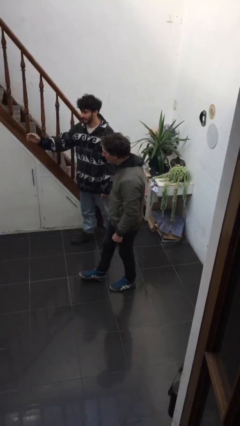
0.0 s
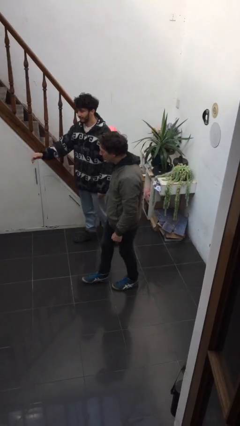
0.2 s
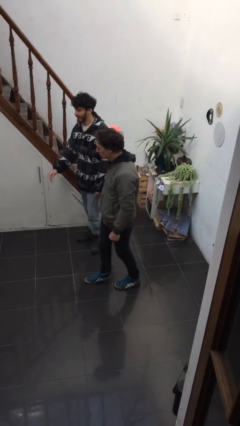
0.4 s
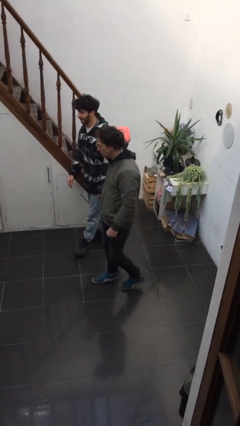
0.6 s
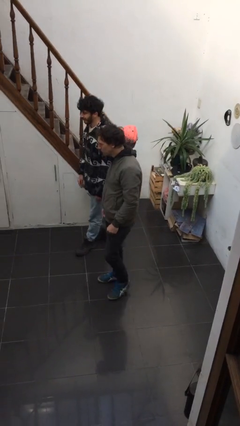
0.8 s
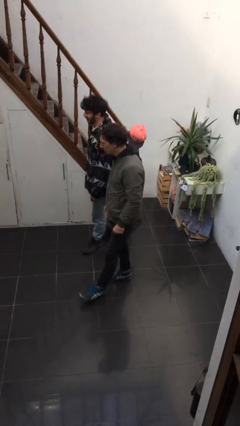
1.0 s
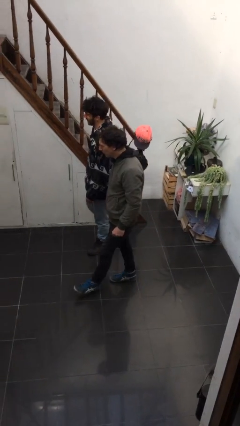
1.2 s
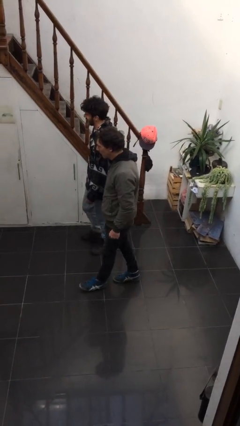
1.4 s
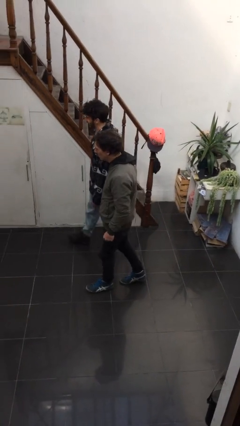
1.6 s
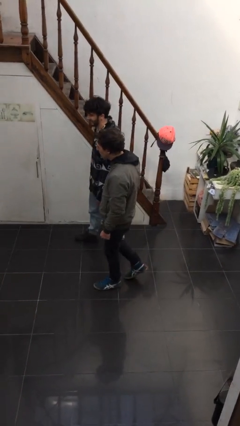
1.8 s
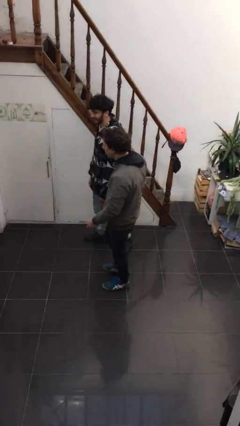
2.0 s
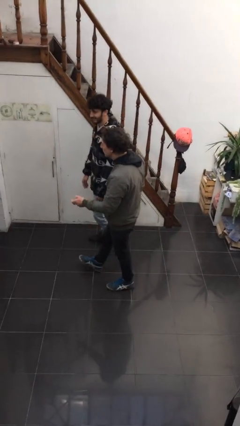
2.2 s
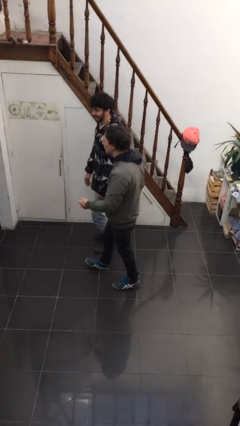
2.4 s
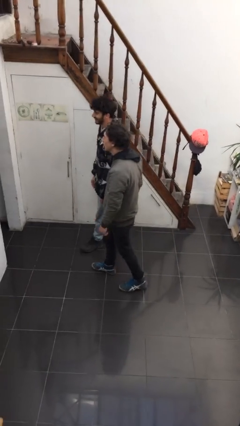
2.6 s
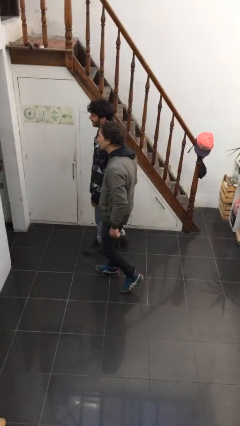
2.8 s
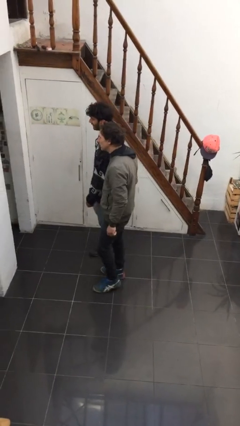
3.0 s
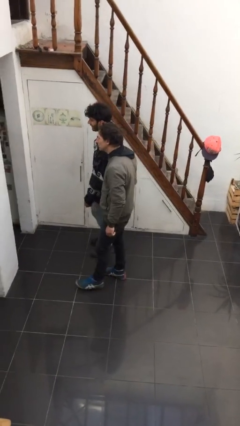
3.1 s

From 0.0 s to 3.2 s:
person talks to person

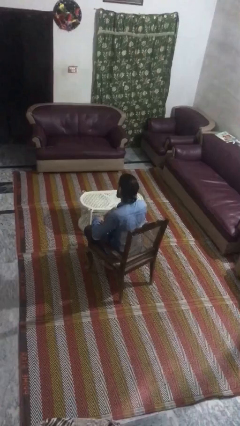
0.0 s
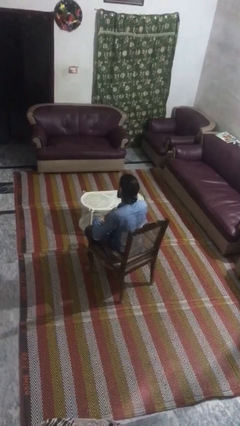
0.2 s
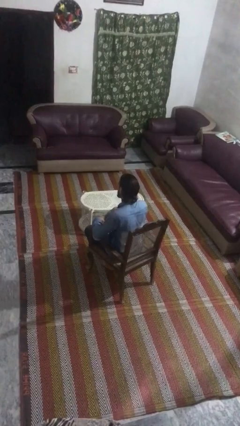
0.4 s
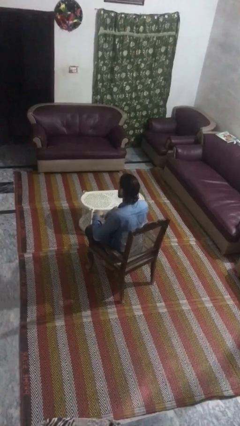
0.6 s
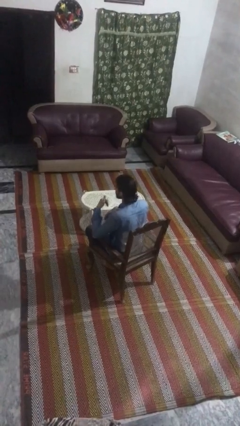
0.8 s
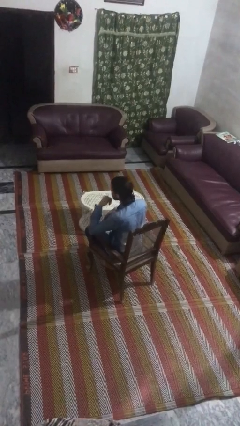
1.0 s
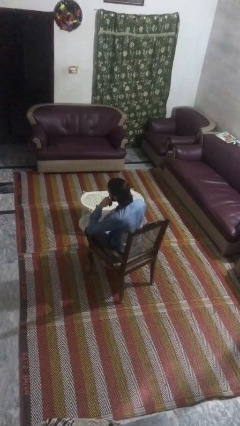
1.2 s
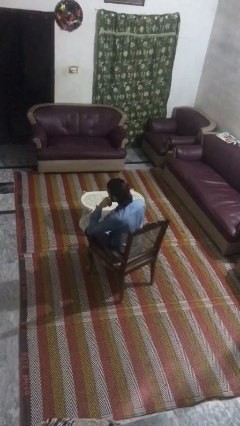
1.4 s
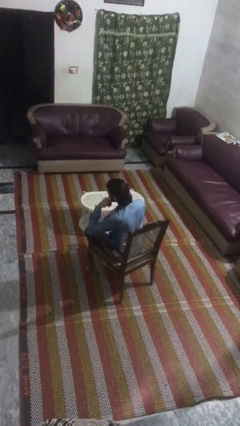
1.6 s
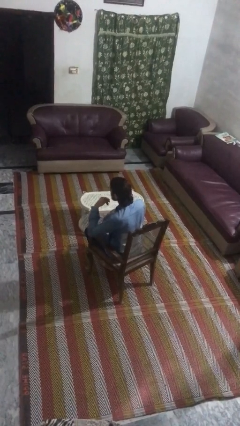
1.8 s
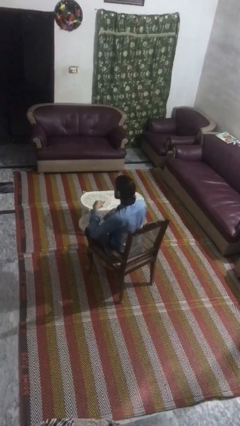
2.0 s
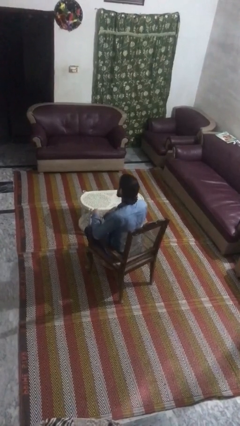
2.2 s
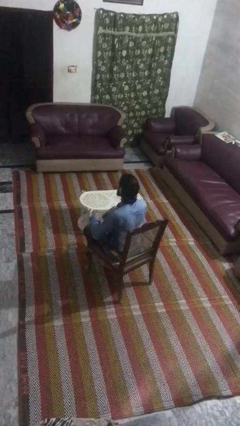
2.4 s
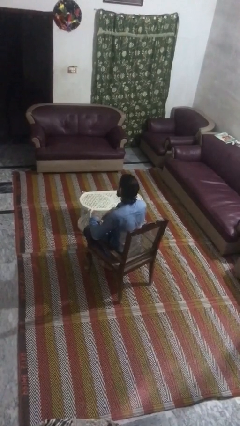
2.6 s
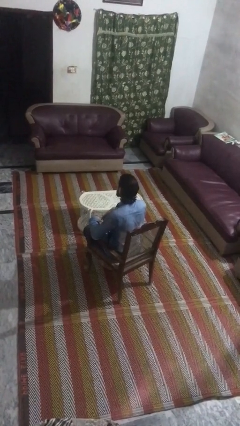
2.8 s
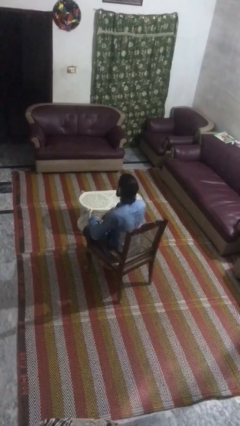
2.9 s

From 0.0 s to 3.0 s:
person gestures call me

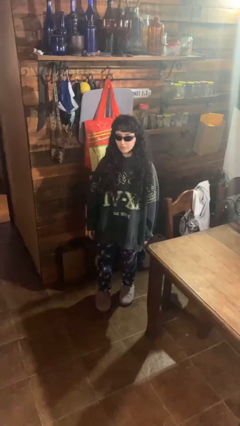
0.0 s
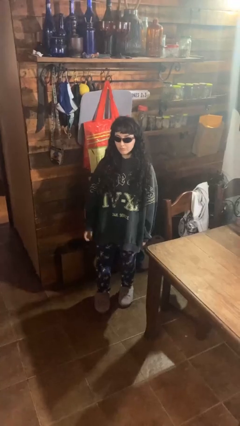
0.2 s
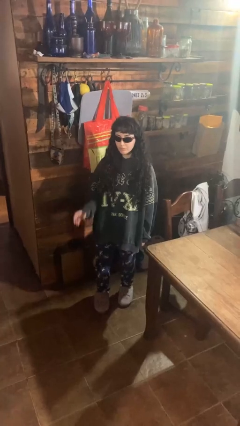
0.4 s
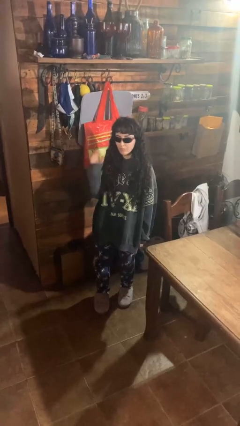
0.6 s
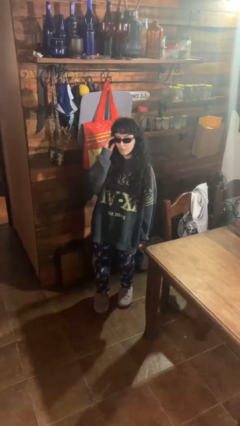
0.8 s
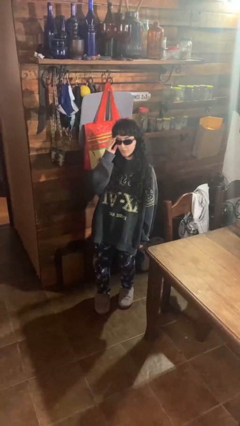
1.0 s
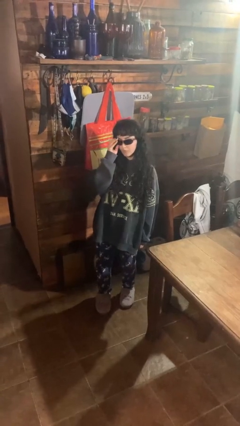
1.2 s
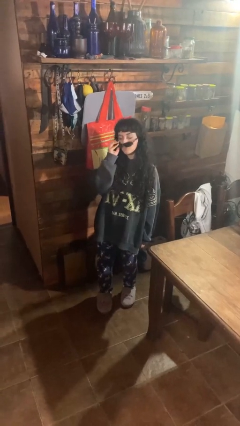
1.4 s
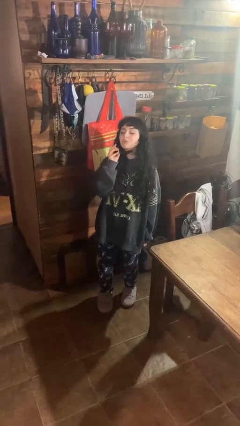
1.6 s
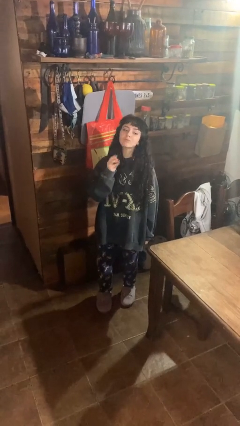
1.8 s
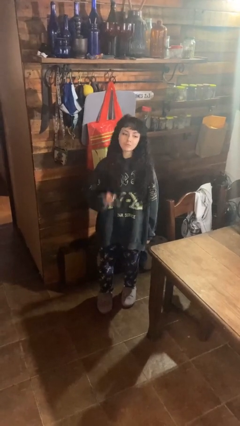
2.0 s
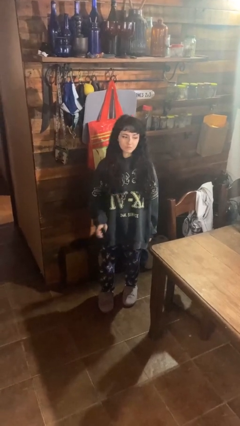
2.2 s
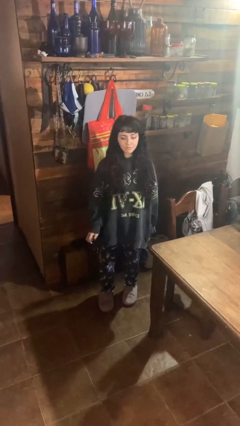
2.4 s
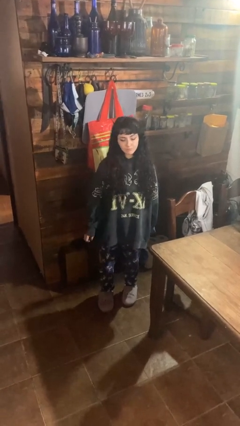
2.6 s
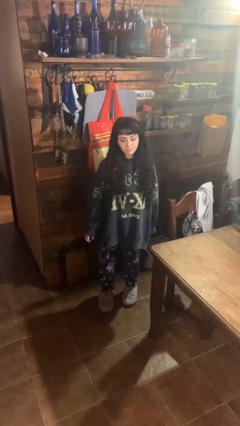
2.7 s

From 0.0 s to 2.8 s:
person takes off sunglasses

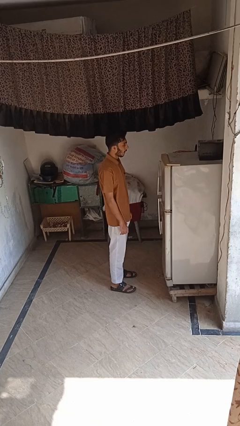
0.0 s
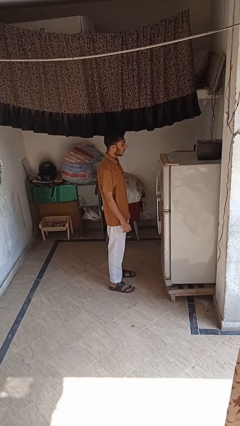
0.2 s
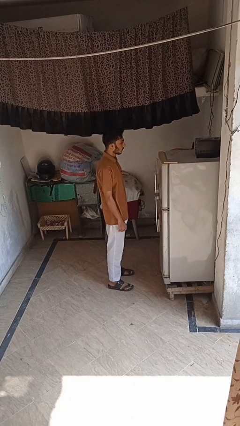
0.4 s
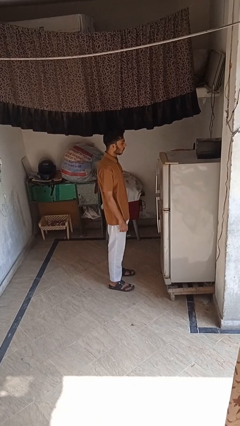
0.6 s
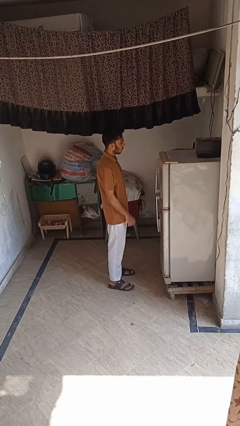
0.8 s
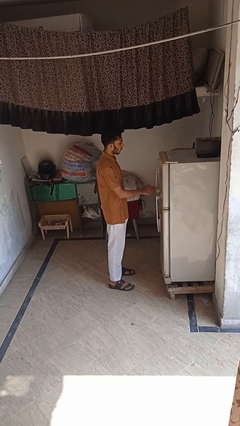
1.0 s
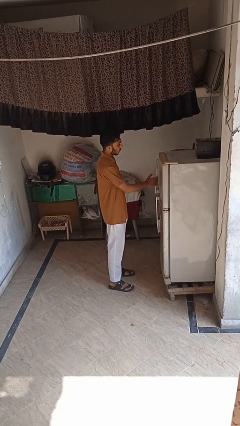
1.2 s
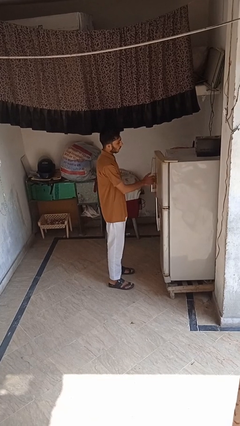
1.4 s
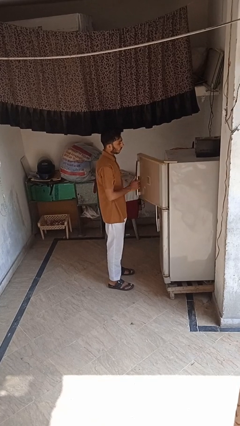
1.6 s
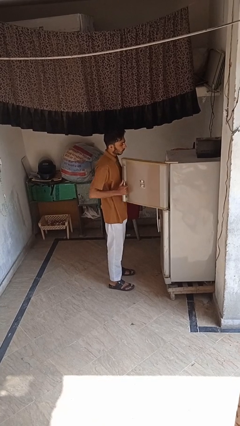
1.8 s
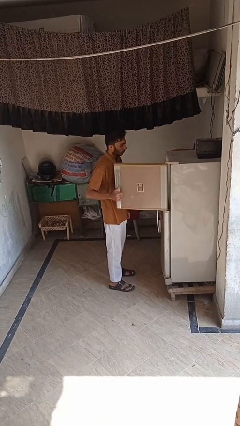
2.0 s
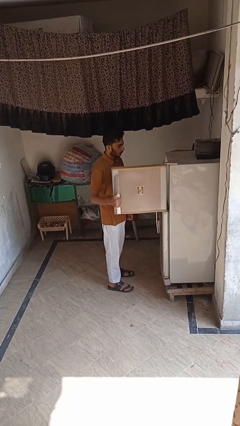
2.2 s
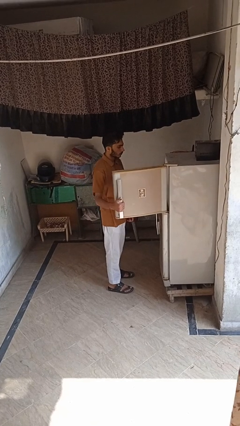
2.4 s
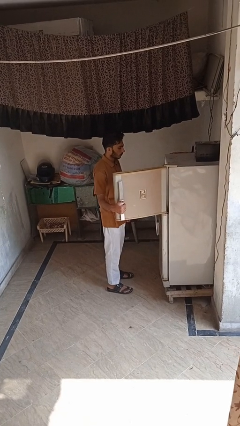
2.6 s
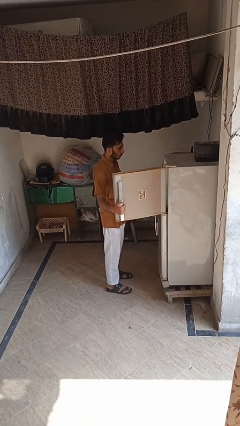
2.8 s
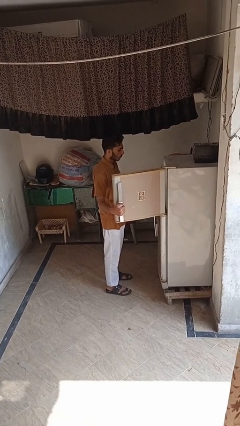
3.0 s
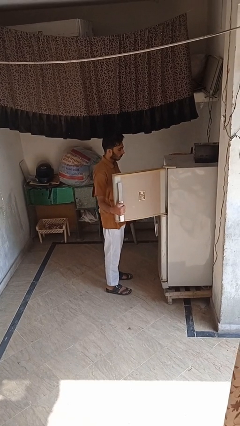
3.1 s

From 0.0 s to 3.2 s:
person opens refrigerator

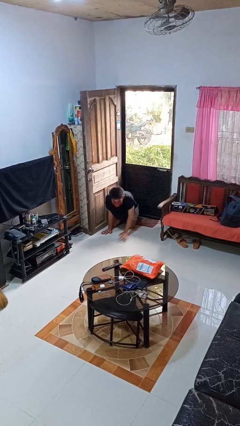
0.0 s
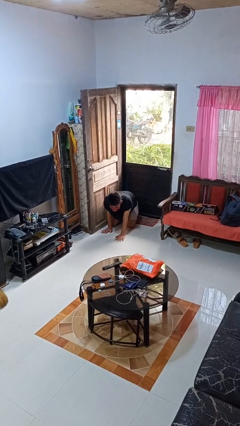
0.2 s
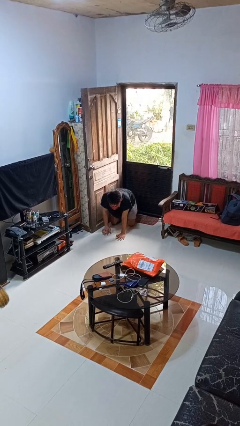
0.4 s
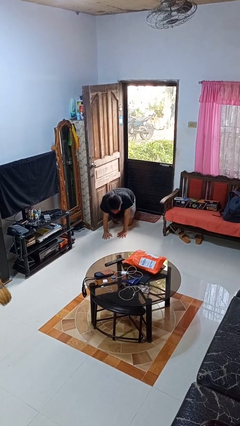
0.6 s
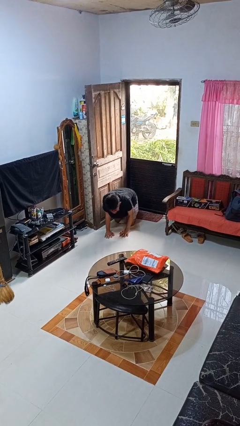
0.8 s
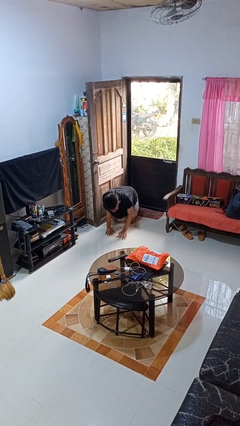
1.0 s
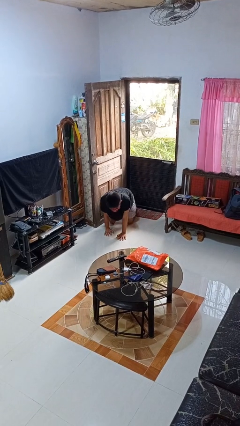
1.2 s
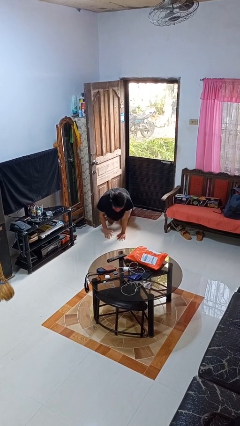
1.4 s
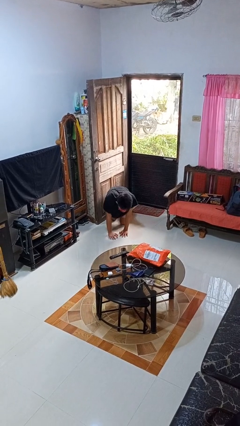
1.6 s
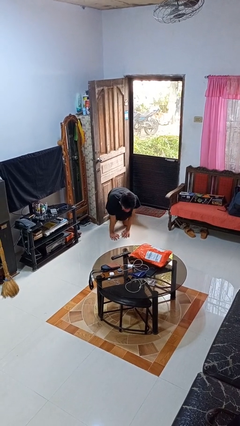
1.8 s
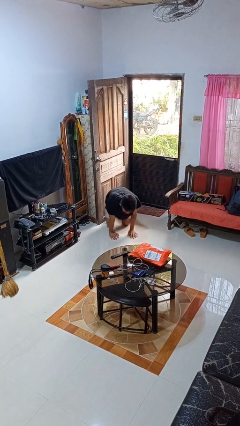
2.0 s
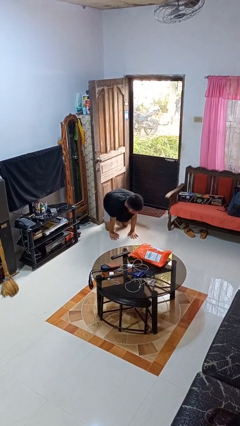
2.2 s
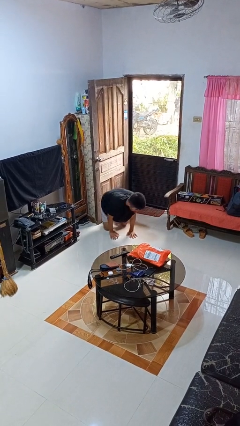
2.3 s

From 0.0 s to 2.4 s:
person crawls

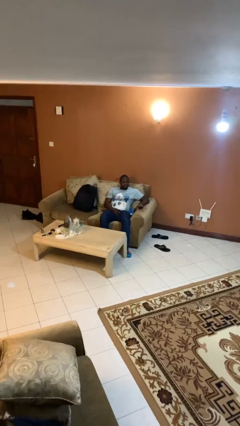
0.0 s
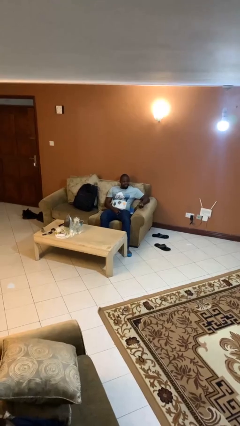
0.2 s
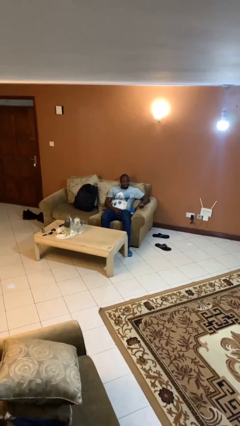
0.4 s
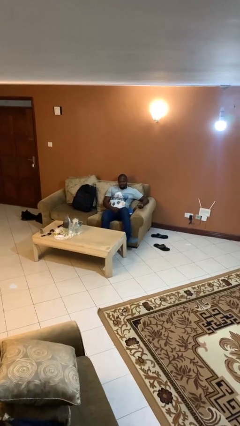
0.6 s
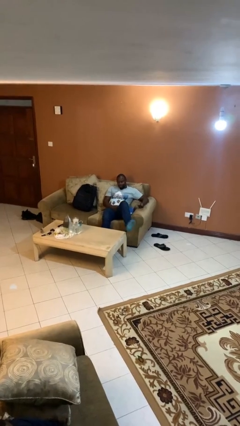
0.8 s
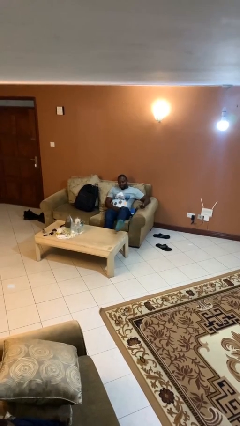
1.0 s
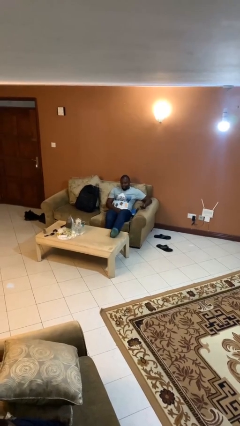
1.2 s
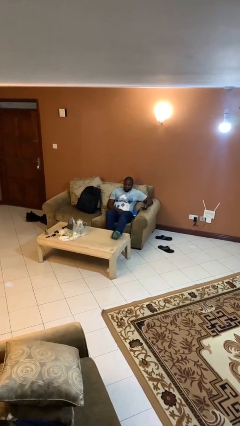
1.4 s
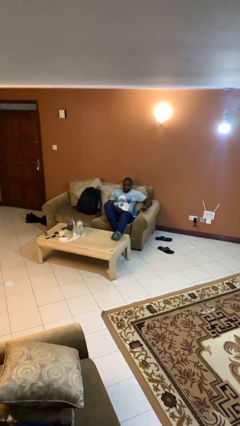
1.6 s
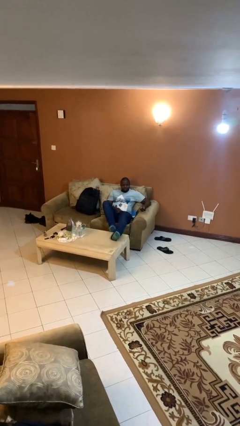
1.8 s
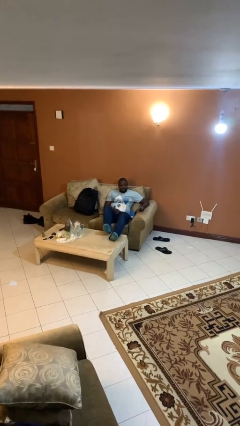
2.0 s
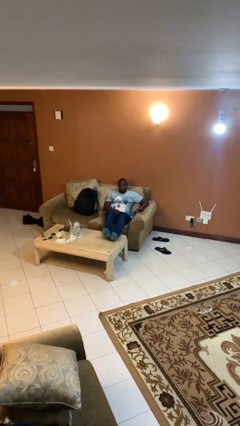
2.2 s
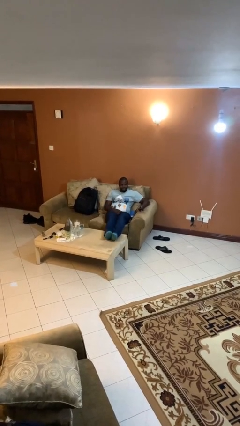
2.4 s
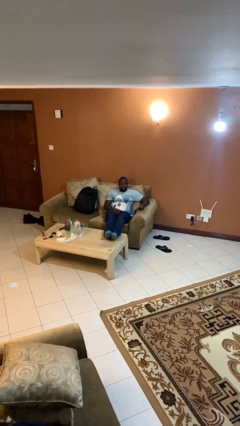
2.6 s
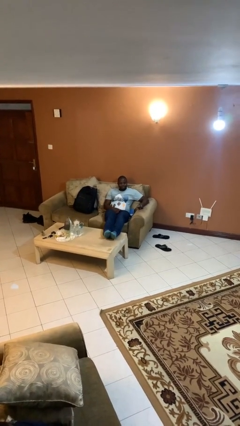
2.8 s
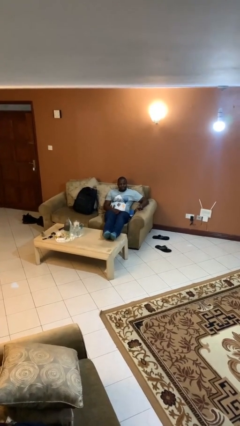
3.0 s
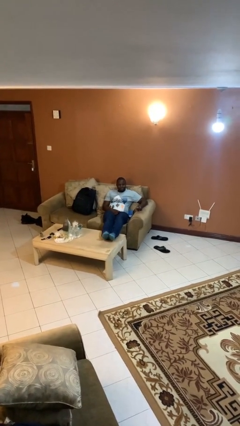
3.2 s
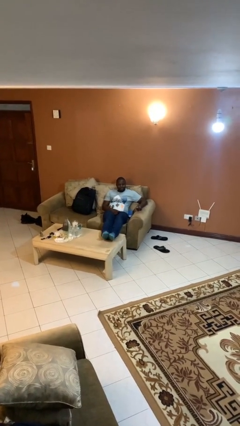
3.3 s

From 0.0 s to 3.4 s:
person puts feet up
